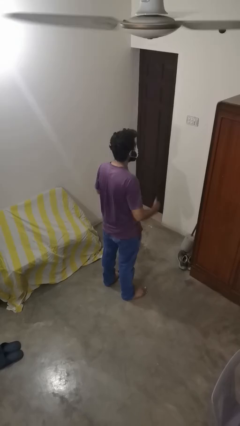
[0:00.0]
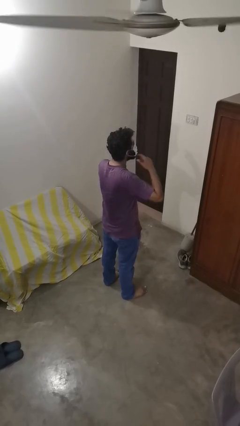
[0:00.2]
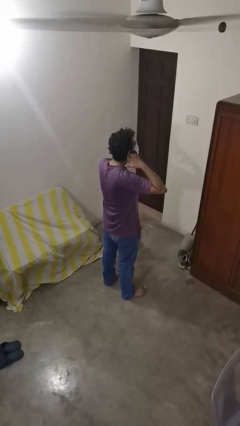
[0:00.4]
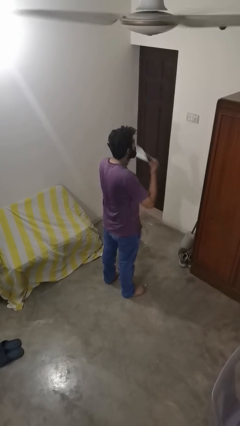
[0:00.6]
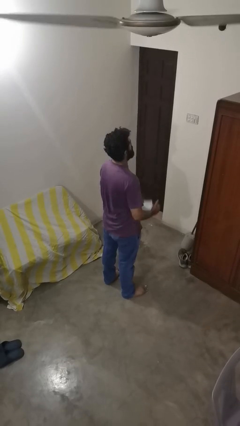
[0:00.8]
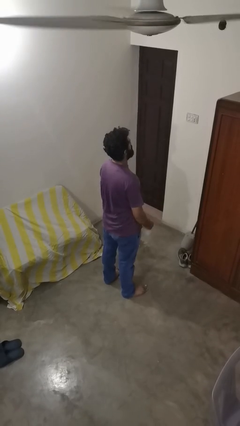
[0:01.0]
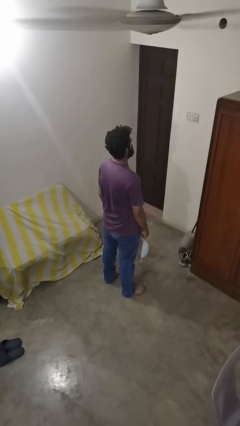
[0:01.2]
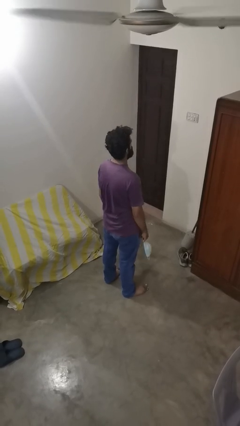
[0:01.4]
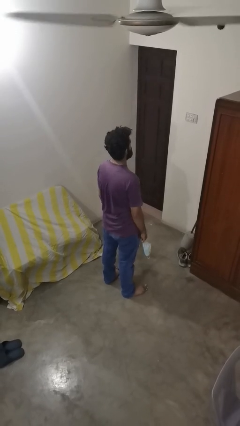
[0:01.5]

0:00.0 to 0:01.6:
person takes off facemask

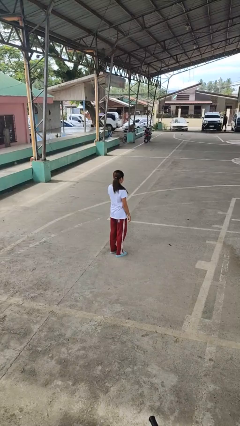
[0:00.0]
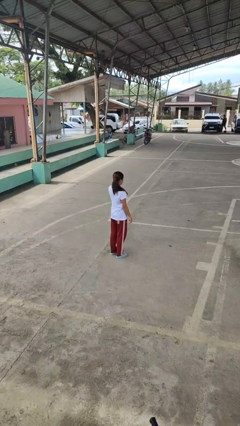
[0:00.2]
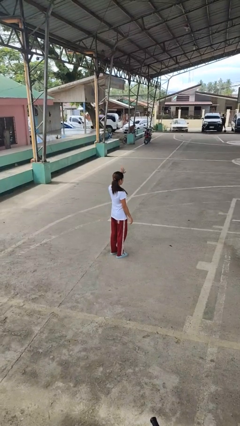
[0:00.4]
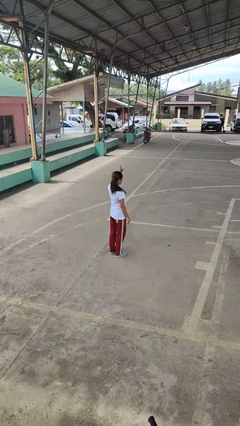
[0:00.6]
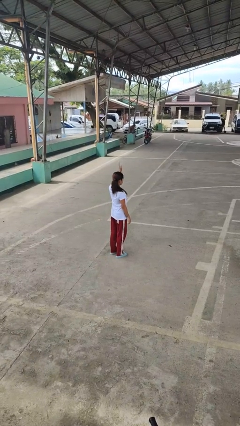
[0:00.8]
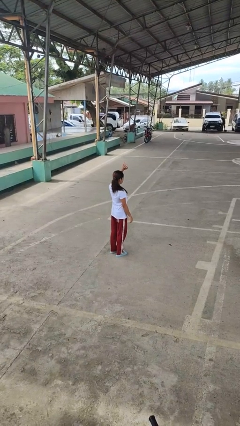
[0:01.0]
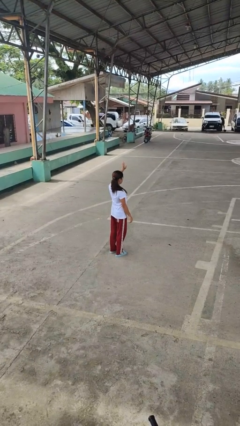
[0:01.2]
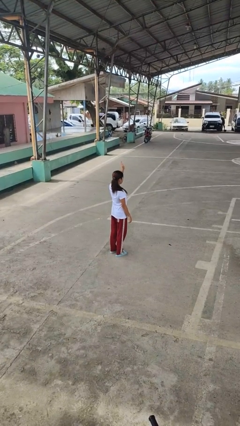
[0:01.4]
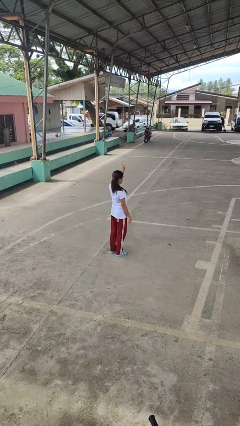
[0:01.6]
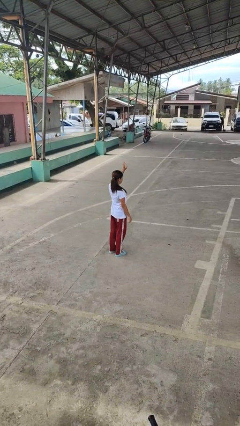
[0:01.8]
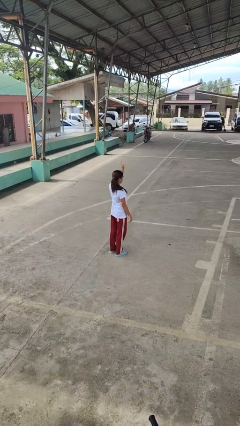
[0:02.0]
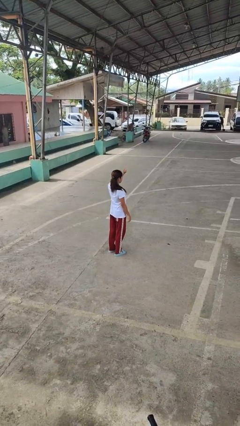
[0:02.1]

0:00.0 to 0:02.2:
person waves at person

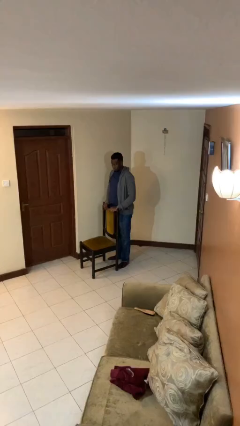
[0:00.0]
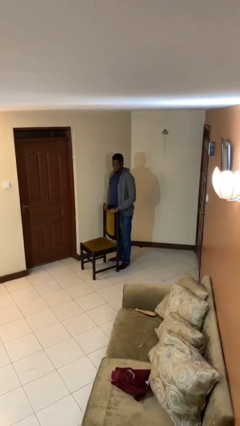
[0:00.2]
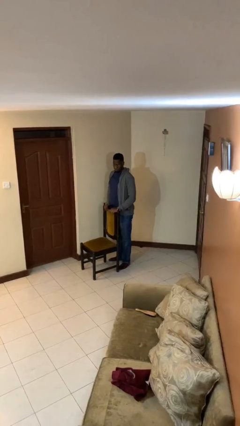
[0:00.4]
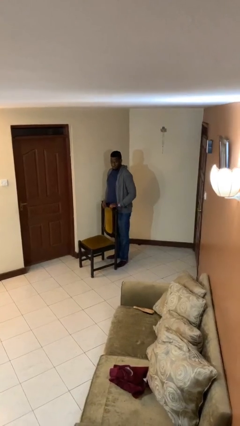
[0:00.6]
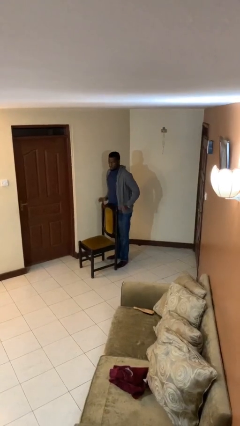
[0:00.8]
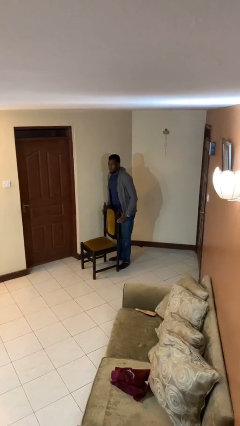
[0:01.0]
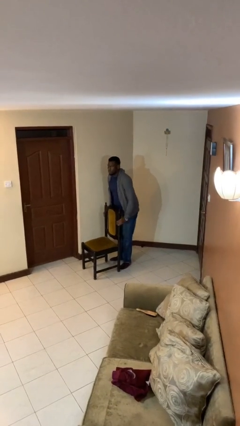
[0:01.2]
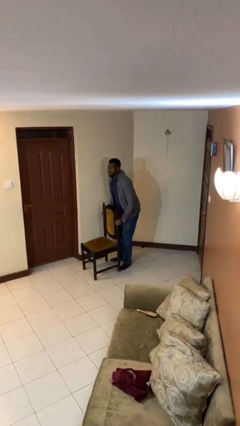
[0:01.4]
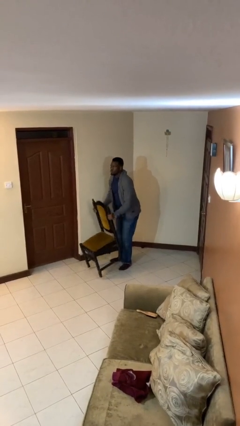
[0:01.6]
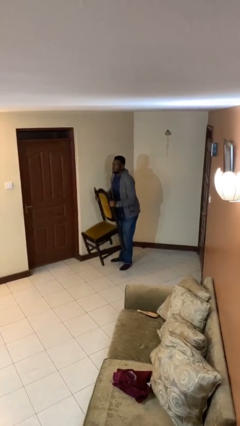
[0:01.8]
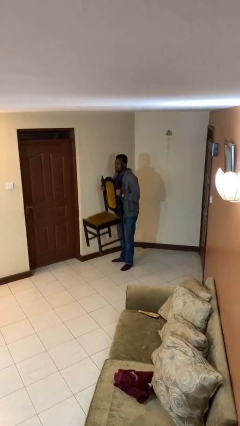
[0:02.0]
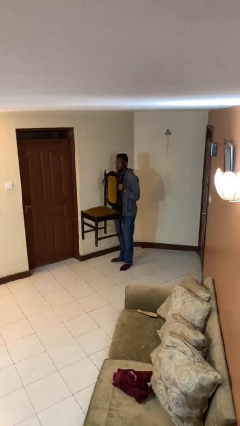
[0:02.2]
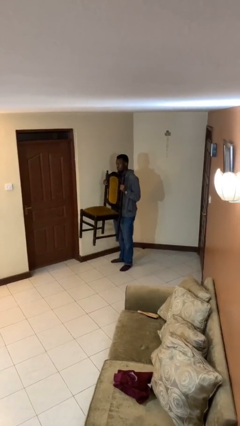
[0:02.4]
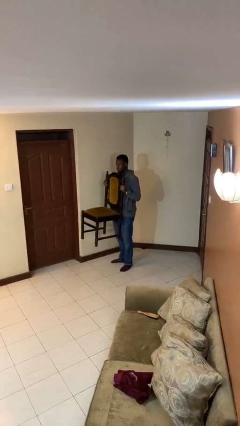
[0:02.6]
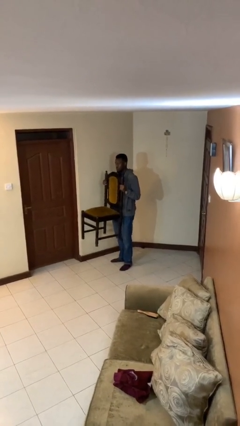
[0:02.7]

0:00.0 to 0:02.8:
person picks up object from floor

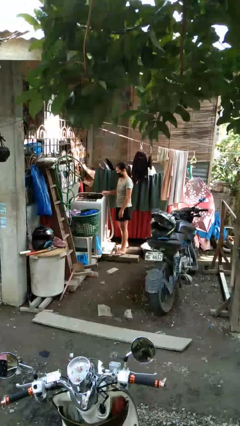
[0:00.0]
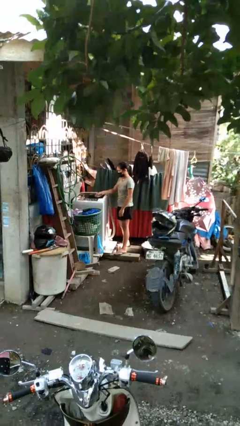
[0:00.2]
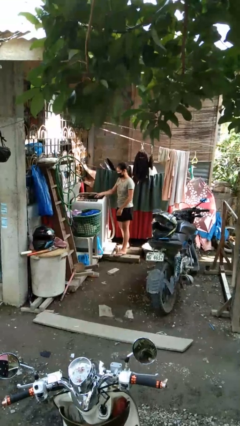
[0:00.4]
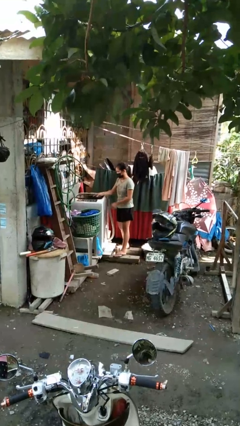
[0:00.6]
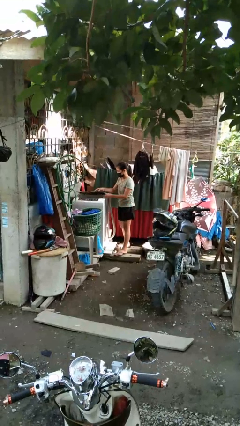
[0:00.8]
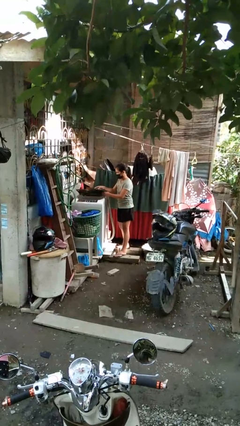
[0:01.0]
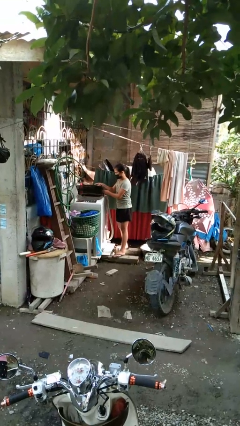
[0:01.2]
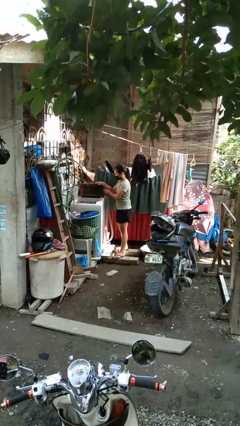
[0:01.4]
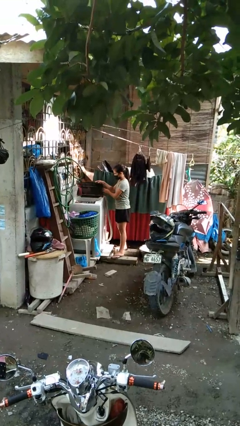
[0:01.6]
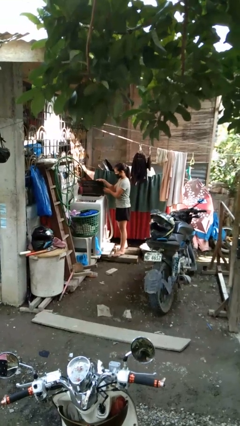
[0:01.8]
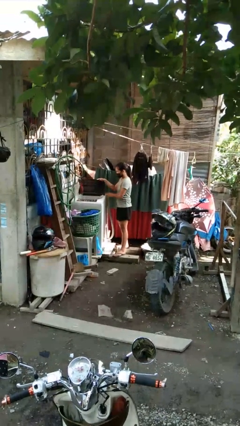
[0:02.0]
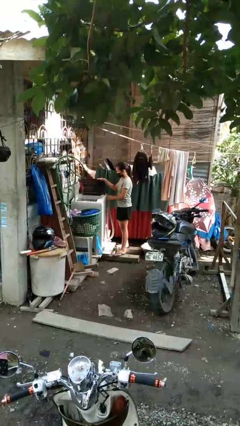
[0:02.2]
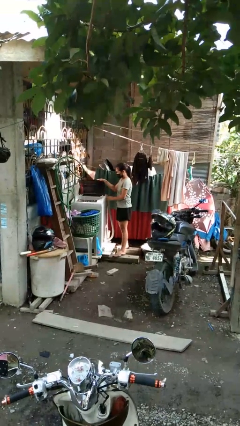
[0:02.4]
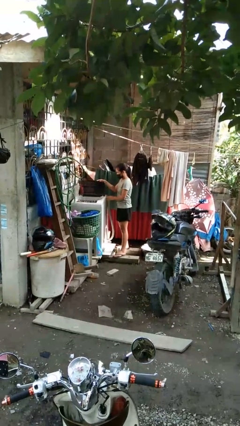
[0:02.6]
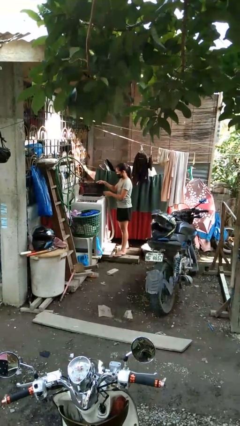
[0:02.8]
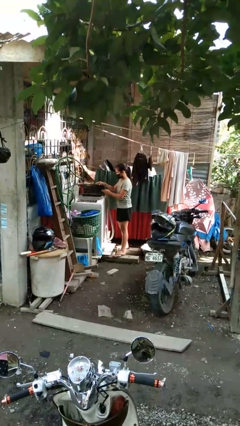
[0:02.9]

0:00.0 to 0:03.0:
person opens clothes washer

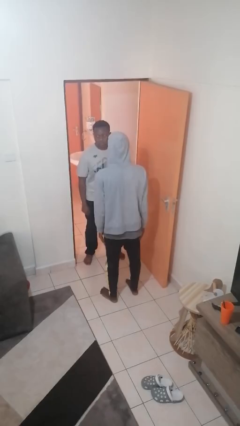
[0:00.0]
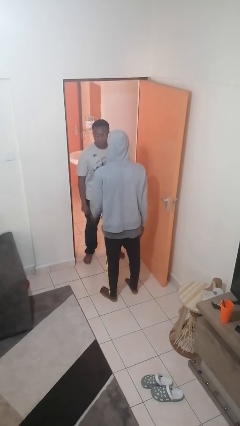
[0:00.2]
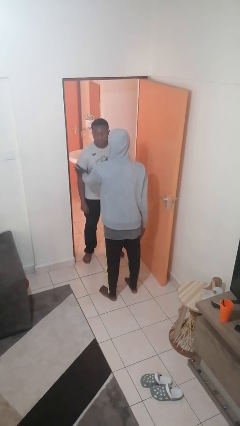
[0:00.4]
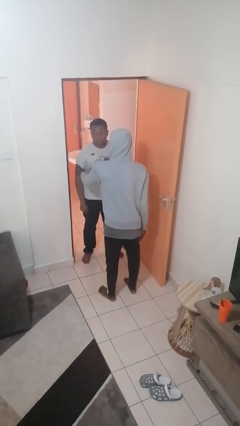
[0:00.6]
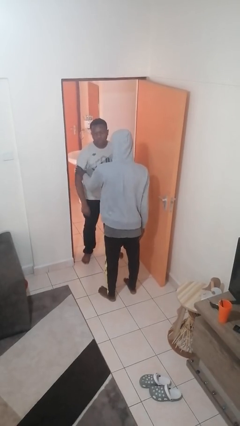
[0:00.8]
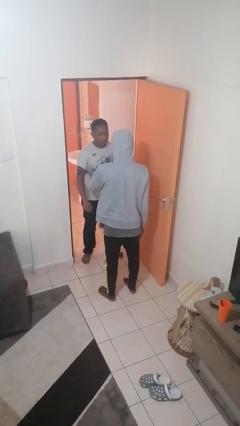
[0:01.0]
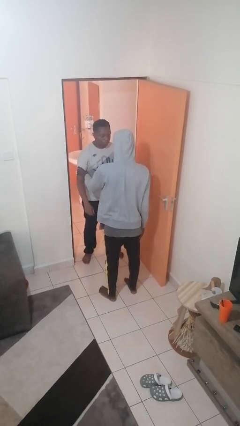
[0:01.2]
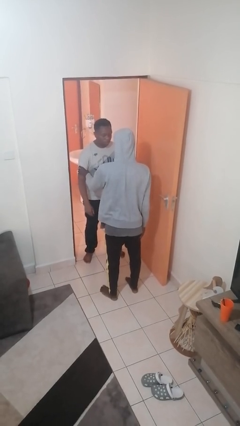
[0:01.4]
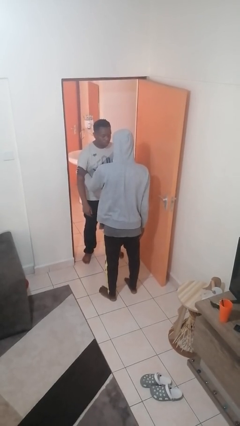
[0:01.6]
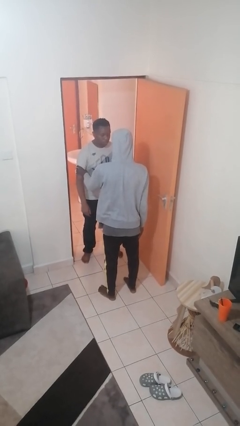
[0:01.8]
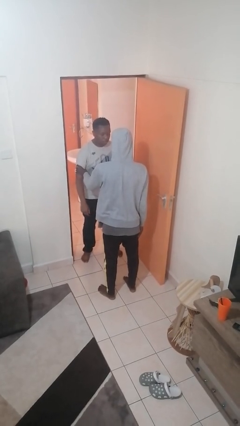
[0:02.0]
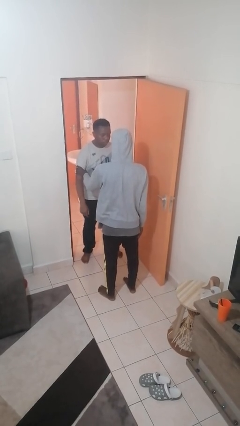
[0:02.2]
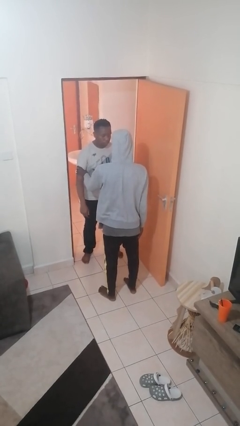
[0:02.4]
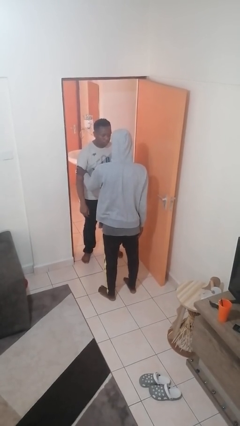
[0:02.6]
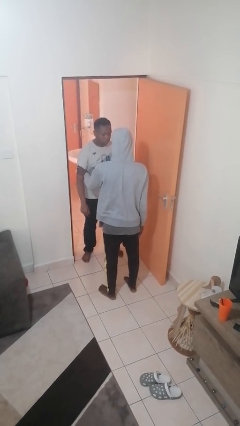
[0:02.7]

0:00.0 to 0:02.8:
person grabs person by bicep

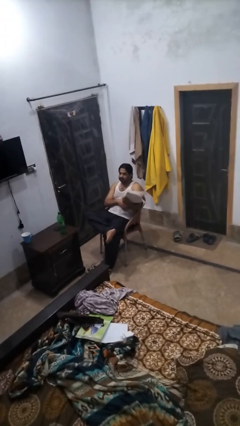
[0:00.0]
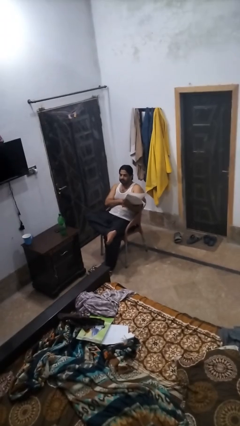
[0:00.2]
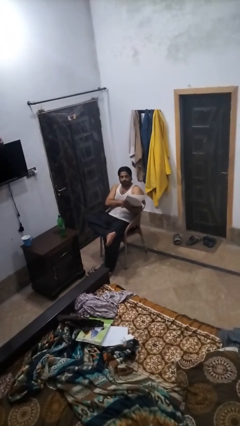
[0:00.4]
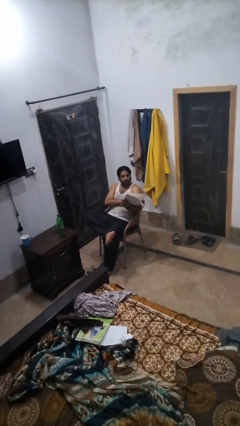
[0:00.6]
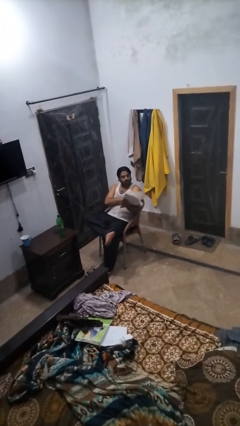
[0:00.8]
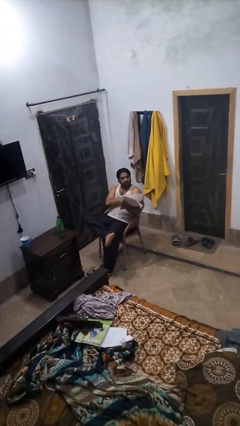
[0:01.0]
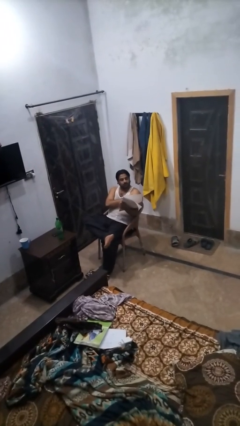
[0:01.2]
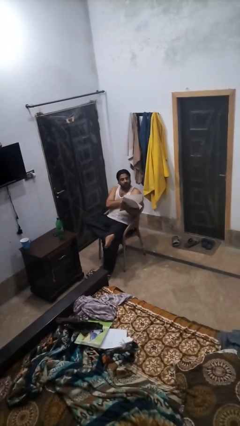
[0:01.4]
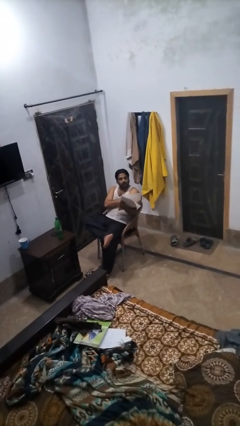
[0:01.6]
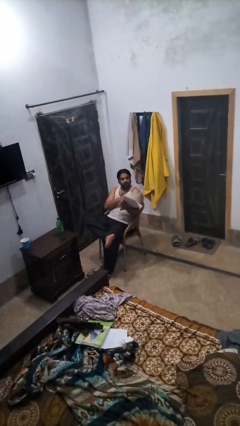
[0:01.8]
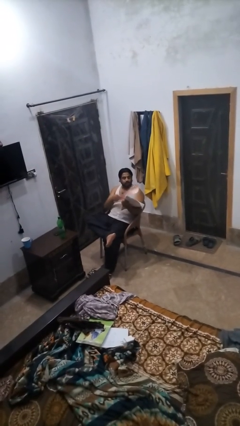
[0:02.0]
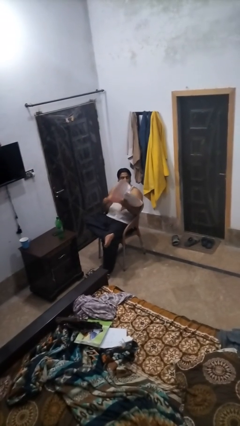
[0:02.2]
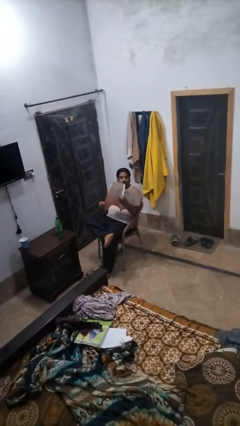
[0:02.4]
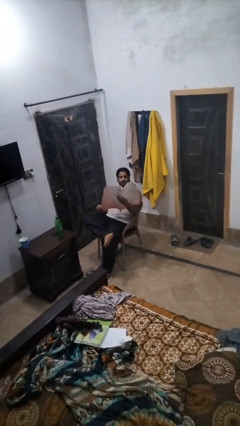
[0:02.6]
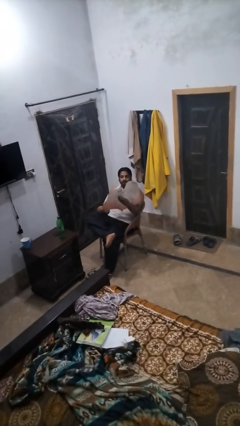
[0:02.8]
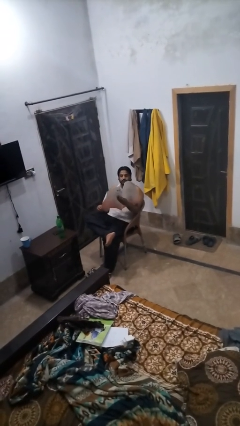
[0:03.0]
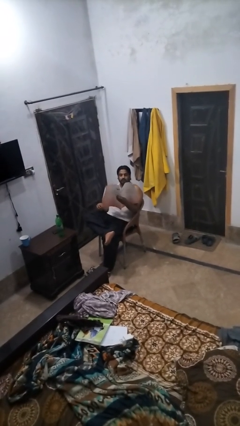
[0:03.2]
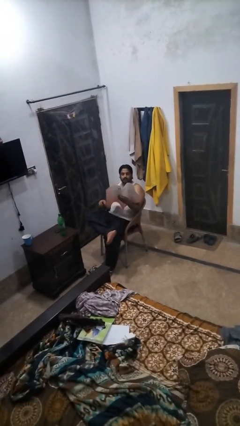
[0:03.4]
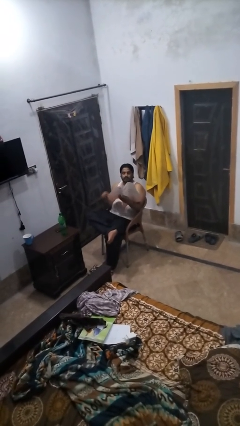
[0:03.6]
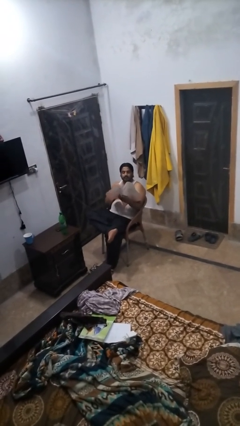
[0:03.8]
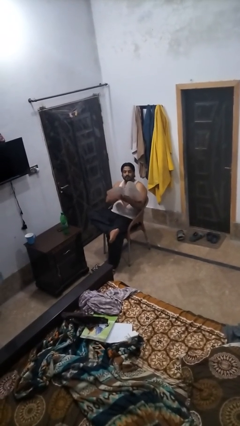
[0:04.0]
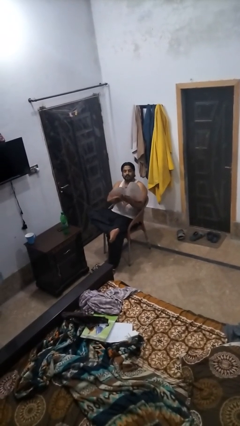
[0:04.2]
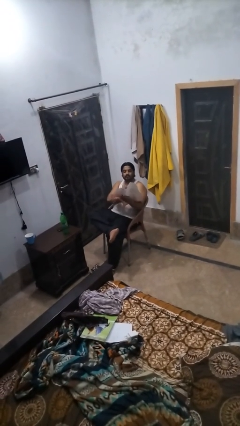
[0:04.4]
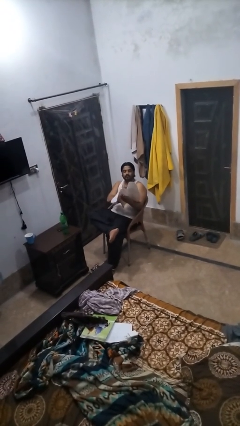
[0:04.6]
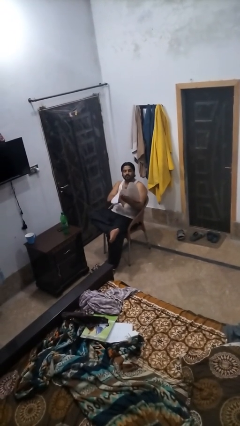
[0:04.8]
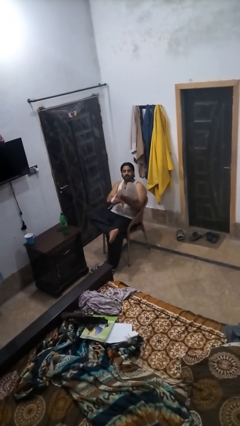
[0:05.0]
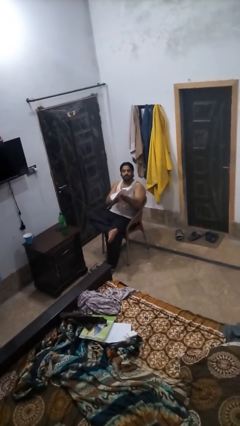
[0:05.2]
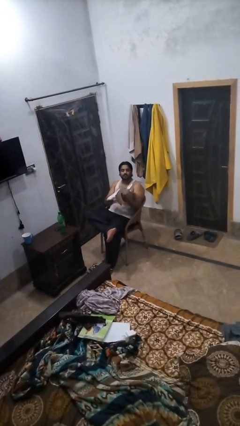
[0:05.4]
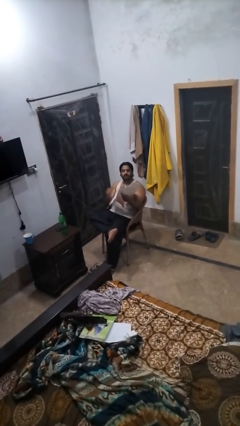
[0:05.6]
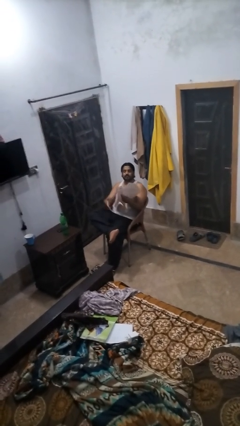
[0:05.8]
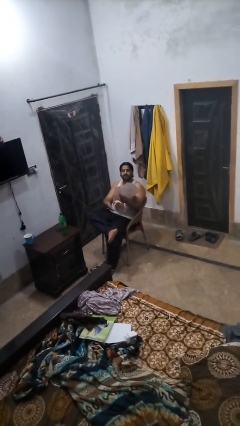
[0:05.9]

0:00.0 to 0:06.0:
person reads newspaper
